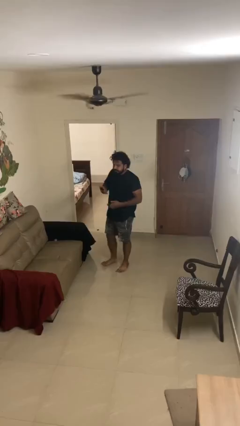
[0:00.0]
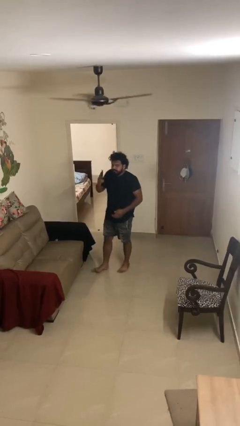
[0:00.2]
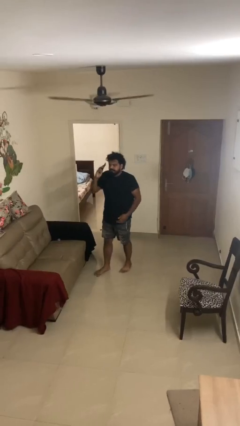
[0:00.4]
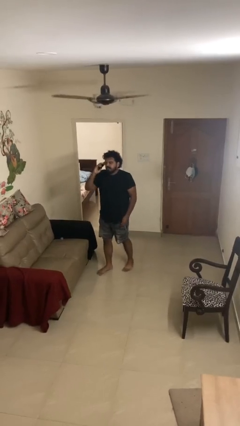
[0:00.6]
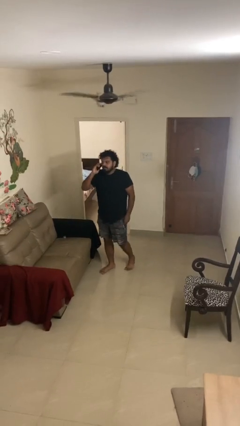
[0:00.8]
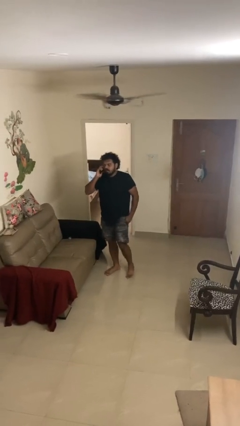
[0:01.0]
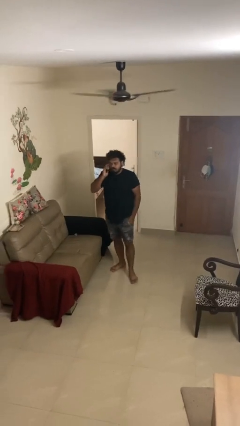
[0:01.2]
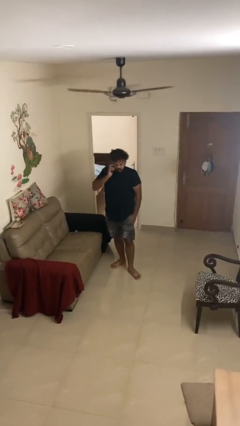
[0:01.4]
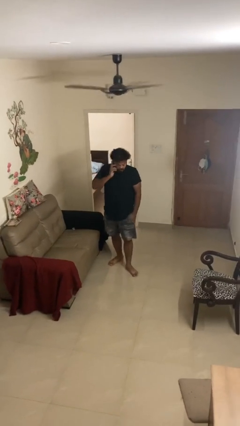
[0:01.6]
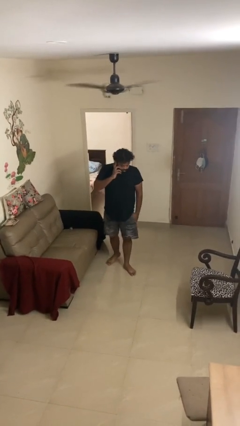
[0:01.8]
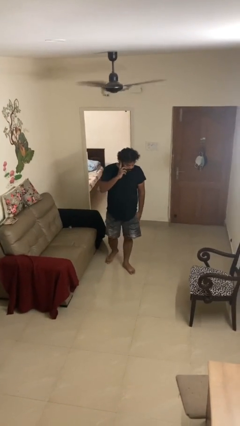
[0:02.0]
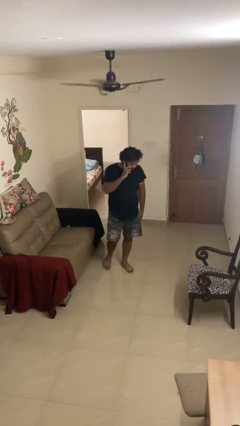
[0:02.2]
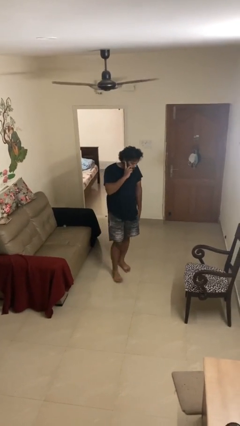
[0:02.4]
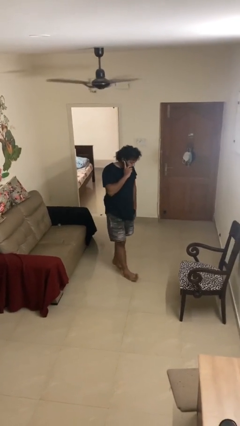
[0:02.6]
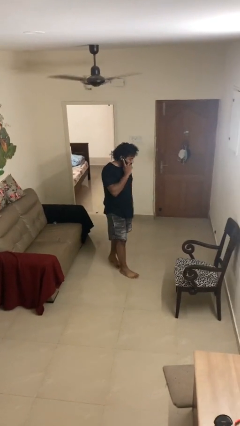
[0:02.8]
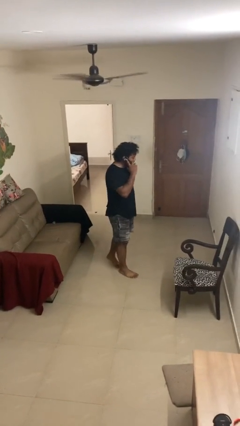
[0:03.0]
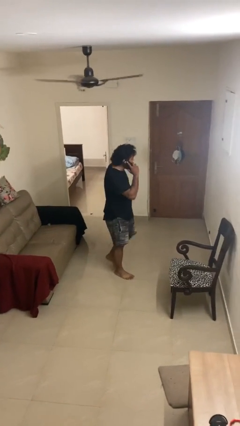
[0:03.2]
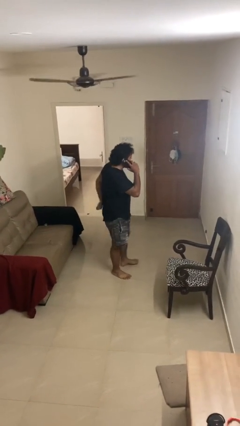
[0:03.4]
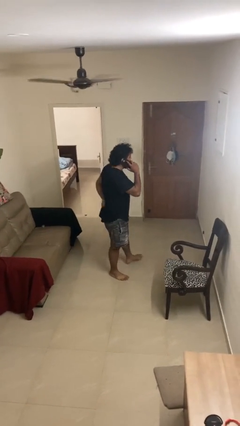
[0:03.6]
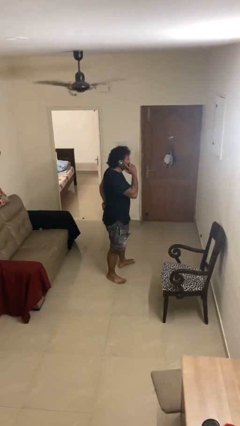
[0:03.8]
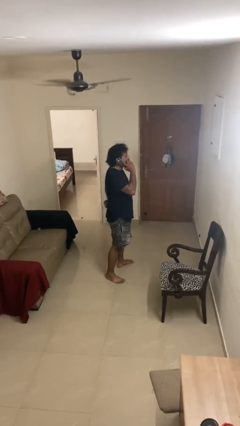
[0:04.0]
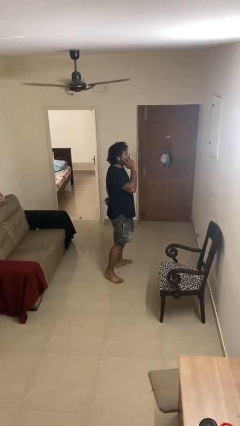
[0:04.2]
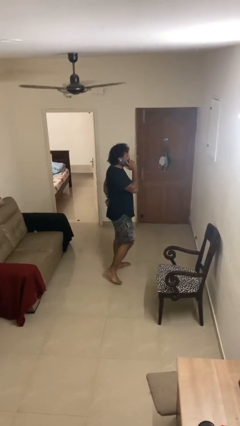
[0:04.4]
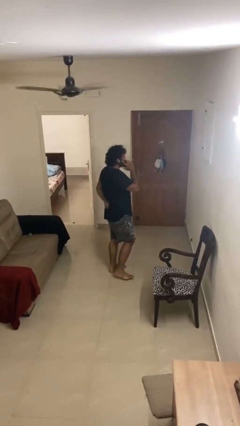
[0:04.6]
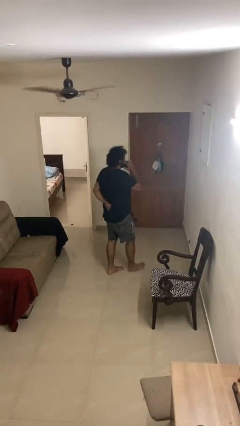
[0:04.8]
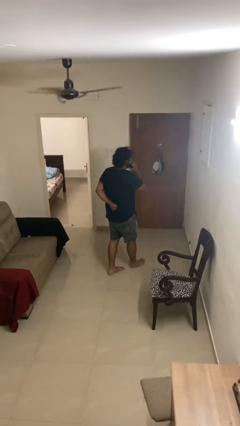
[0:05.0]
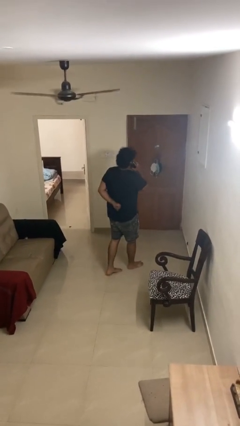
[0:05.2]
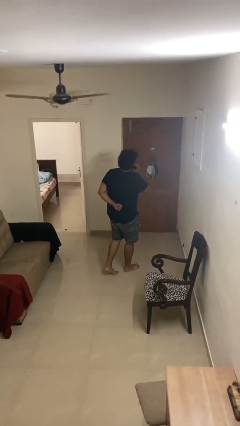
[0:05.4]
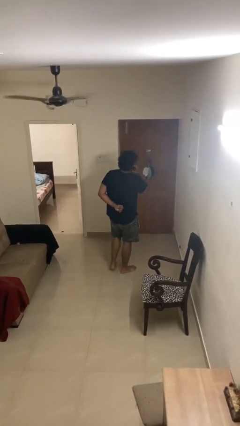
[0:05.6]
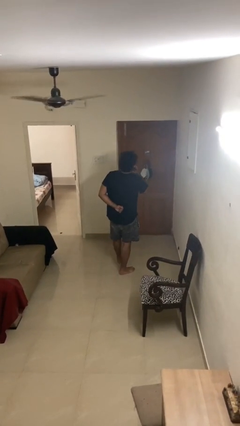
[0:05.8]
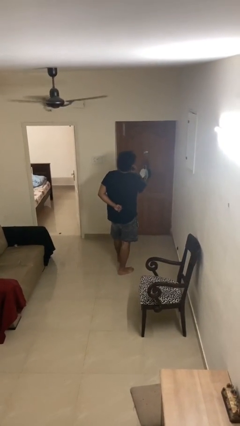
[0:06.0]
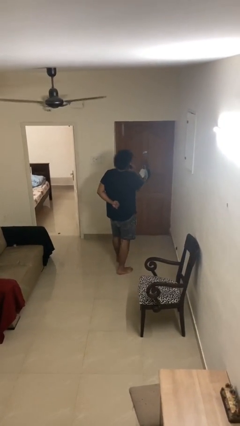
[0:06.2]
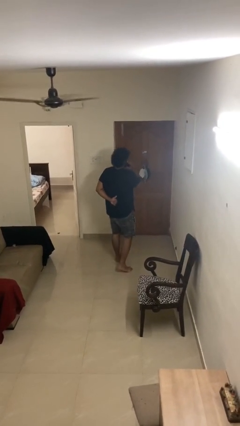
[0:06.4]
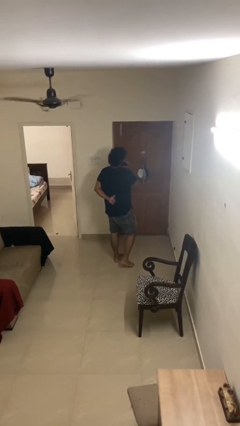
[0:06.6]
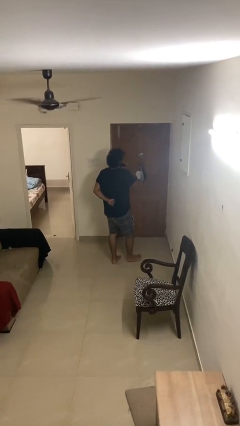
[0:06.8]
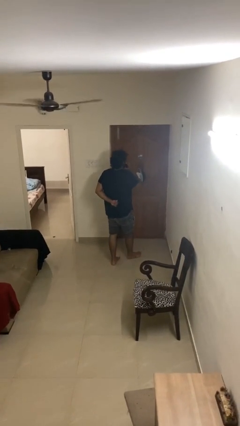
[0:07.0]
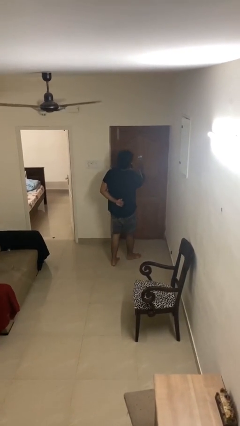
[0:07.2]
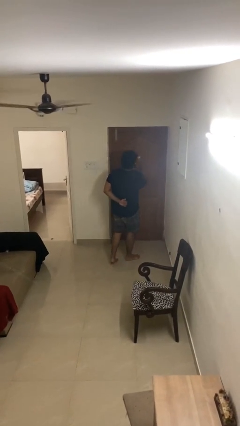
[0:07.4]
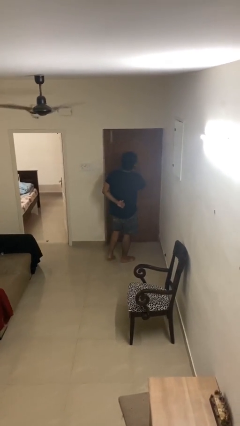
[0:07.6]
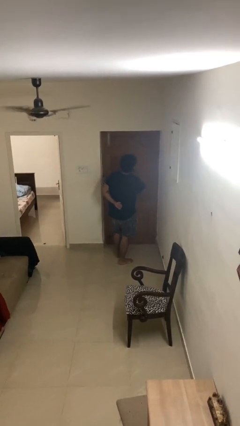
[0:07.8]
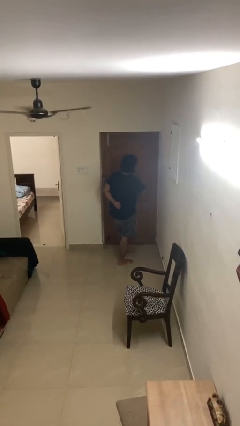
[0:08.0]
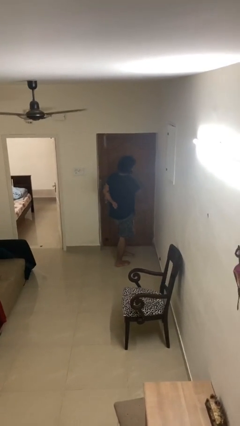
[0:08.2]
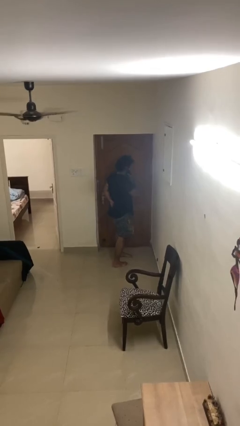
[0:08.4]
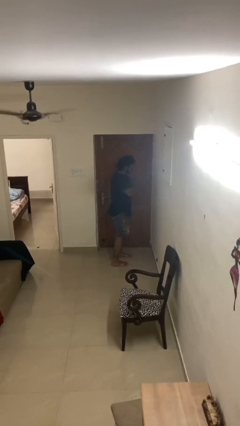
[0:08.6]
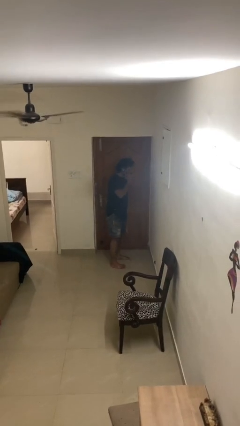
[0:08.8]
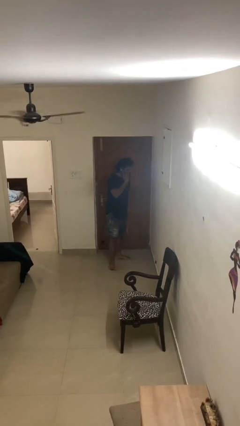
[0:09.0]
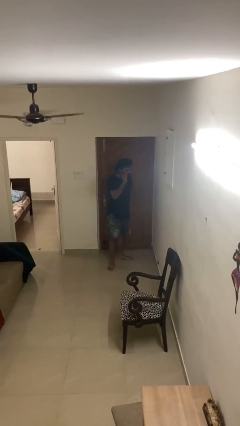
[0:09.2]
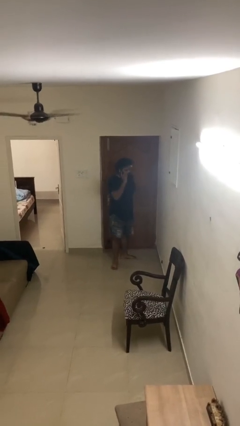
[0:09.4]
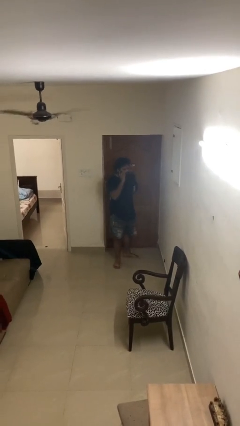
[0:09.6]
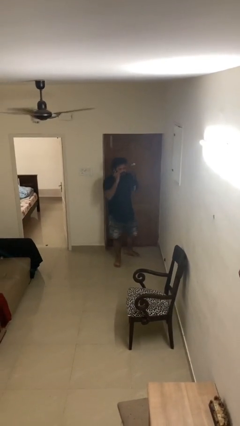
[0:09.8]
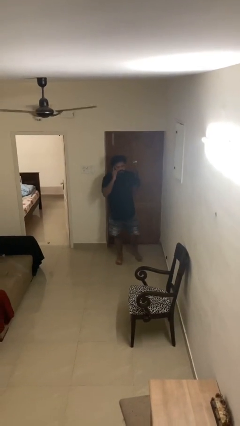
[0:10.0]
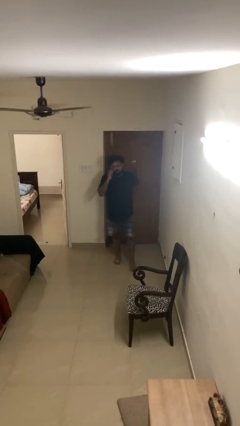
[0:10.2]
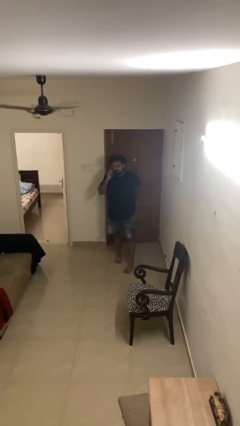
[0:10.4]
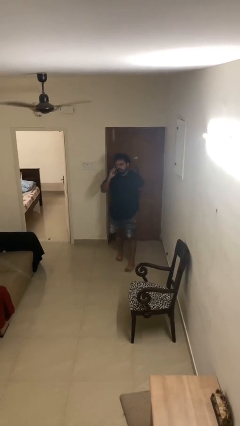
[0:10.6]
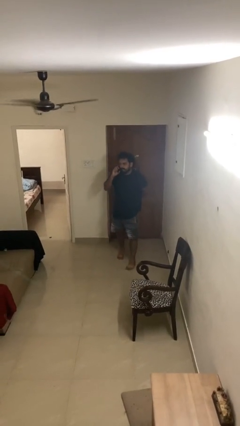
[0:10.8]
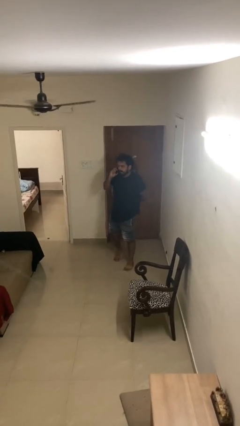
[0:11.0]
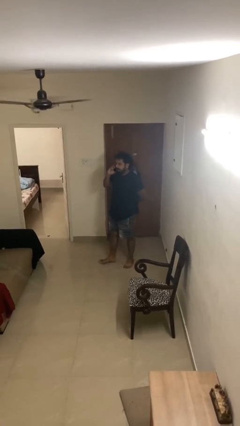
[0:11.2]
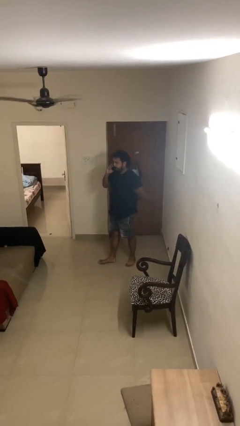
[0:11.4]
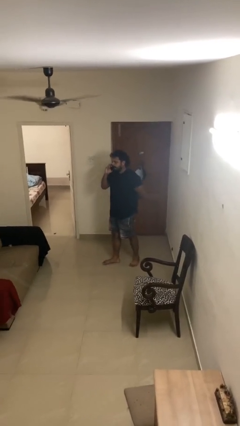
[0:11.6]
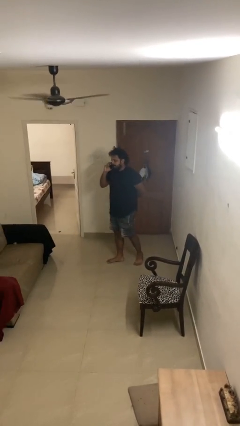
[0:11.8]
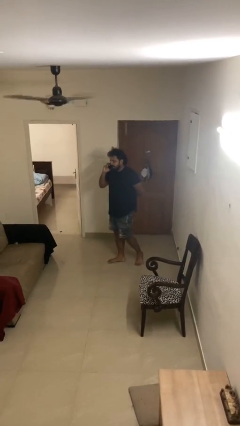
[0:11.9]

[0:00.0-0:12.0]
person talks on phone

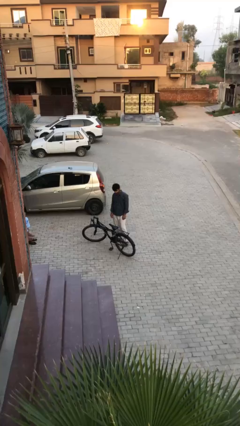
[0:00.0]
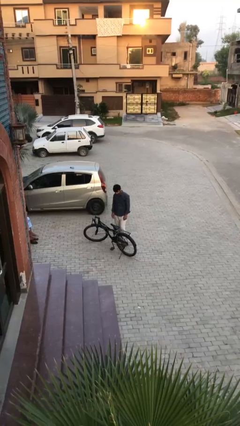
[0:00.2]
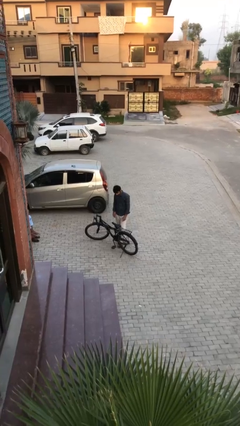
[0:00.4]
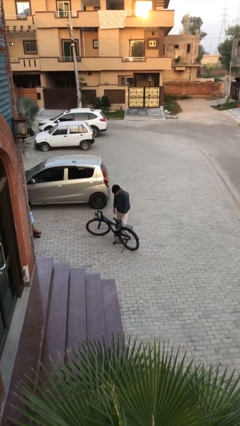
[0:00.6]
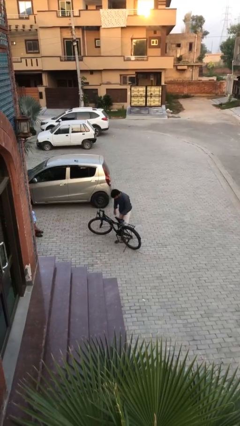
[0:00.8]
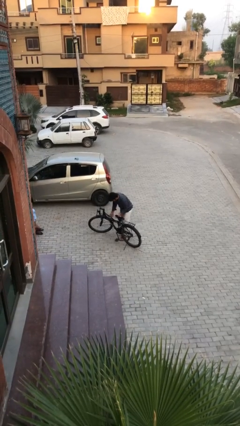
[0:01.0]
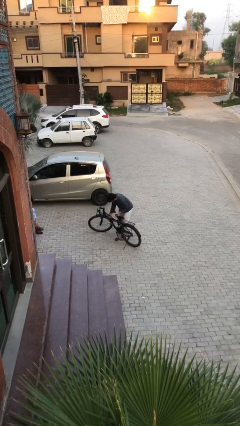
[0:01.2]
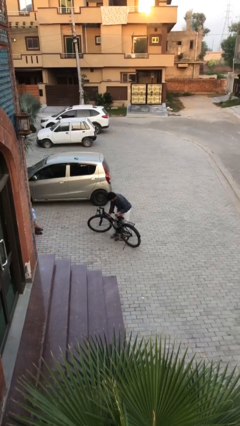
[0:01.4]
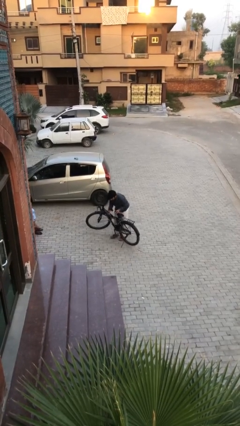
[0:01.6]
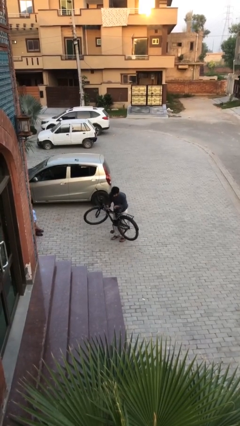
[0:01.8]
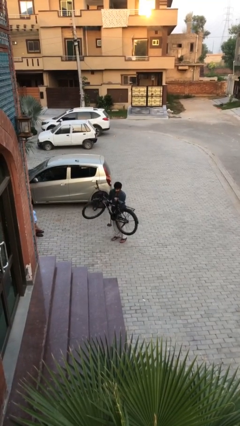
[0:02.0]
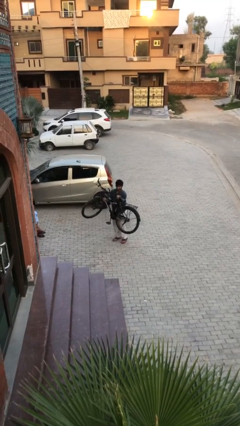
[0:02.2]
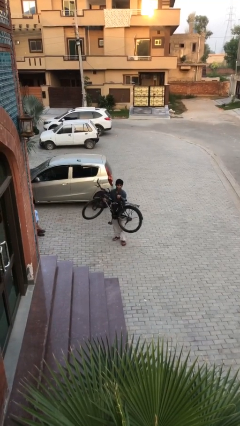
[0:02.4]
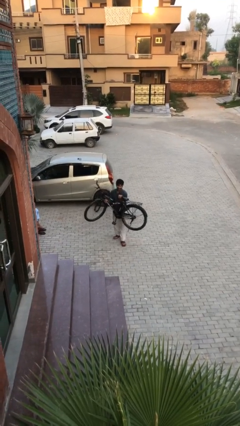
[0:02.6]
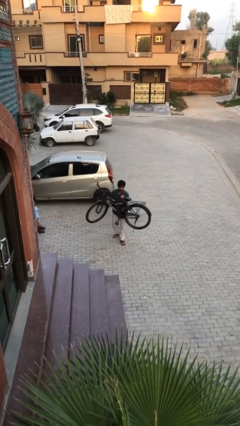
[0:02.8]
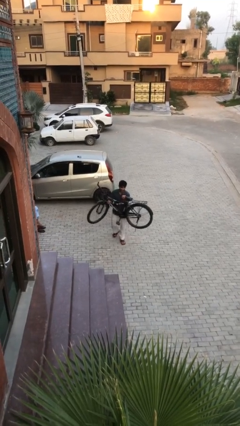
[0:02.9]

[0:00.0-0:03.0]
person picks up object from floor

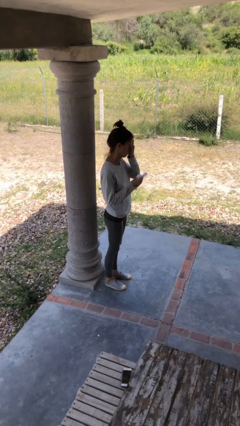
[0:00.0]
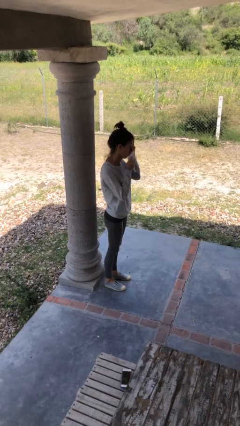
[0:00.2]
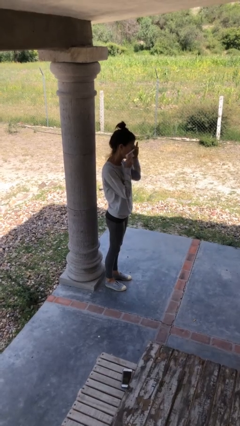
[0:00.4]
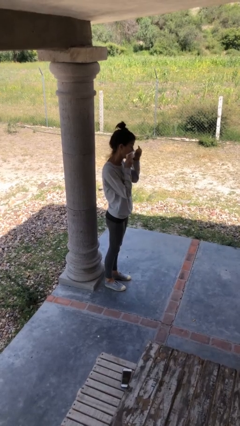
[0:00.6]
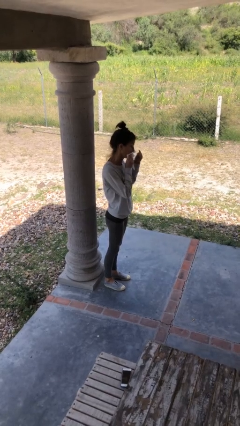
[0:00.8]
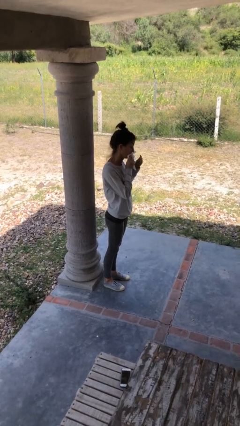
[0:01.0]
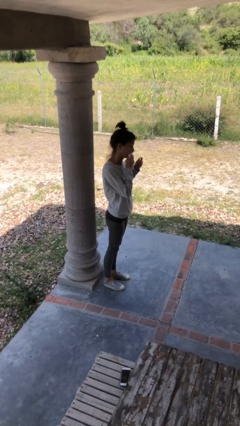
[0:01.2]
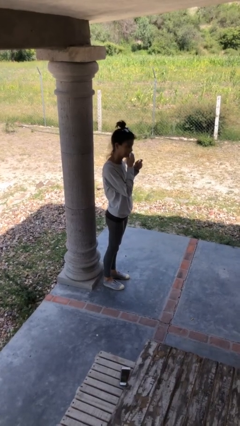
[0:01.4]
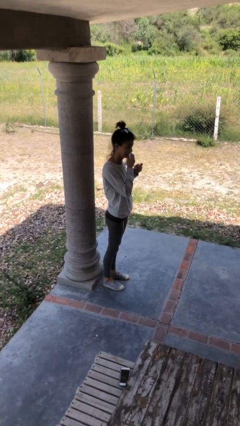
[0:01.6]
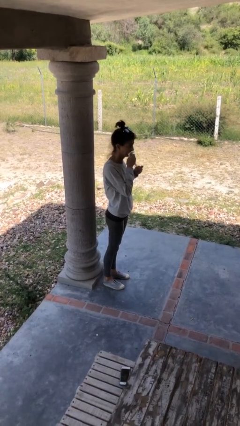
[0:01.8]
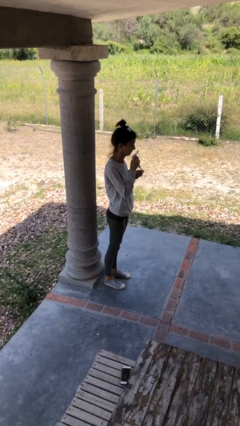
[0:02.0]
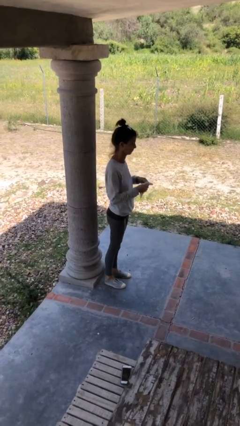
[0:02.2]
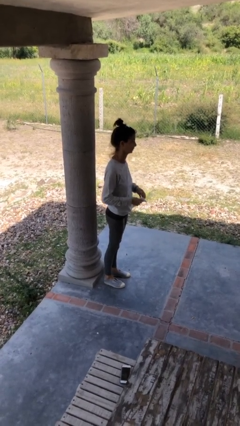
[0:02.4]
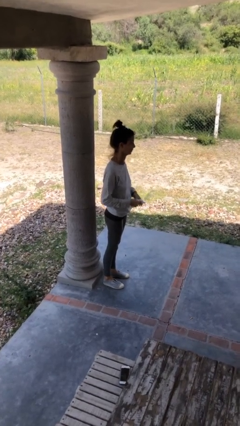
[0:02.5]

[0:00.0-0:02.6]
person wipes mouth with napkin

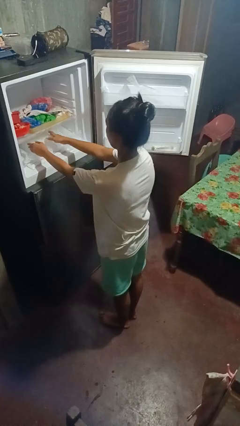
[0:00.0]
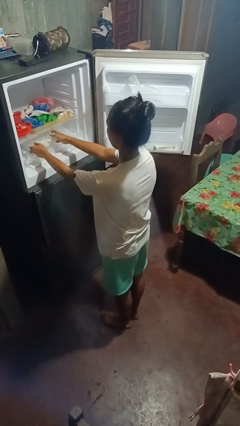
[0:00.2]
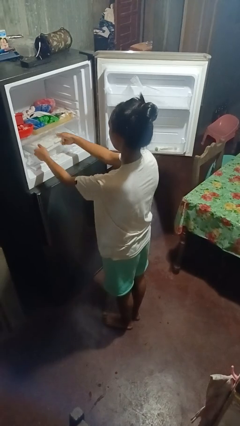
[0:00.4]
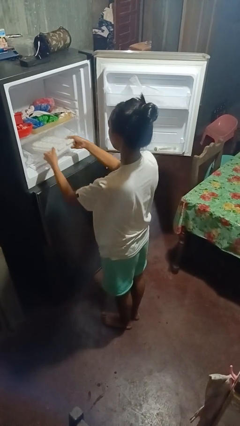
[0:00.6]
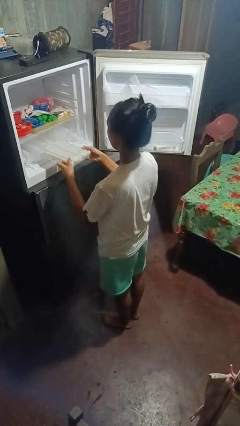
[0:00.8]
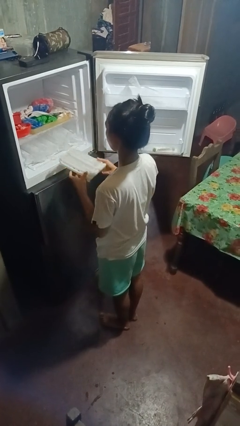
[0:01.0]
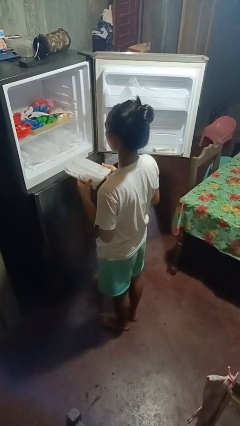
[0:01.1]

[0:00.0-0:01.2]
person takes object from refrigerator
